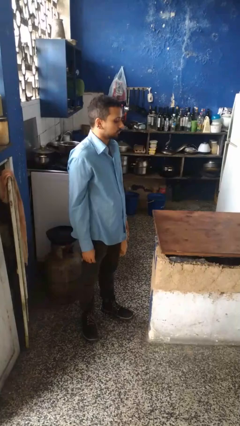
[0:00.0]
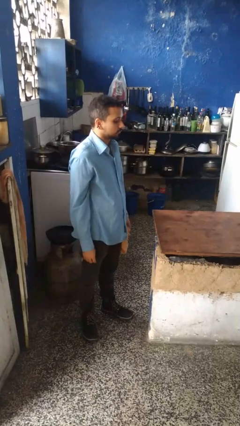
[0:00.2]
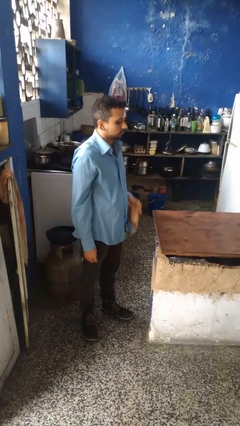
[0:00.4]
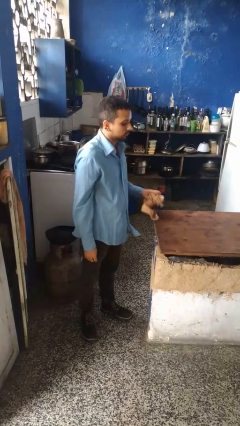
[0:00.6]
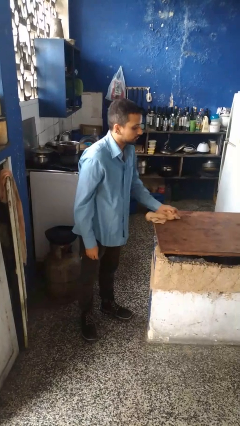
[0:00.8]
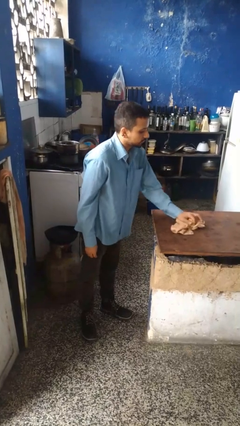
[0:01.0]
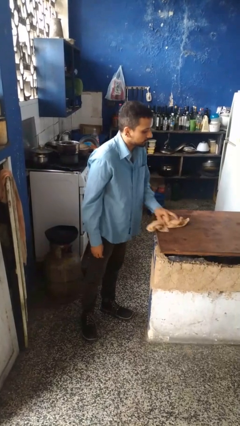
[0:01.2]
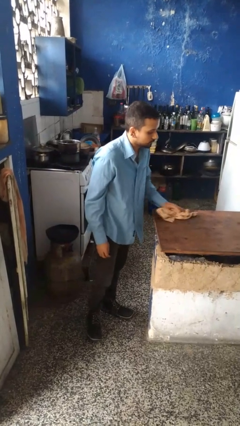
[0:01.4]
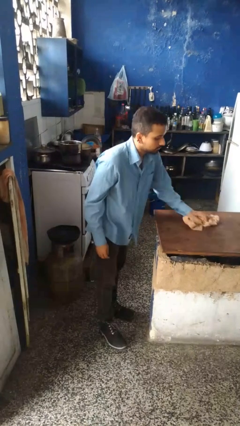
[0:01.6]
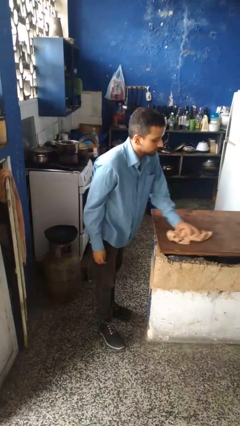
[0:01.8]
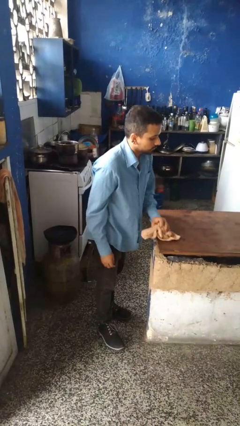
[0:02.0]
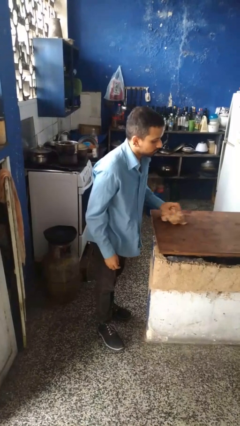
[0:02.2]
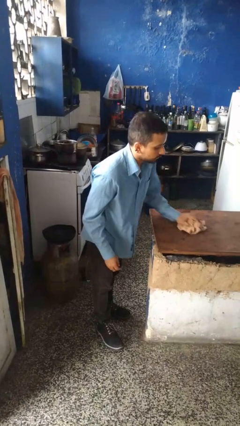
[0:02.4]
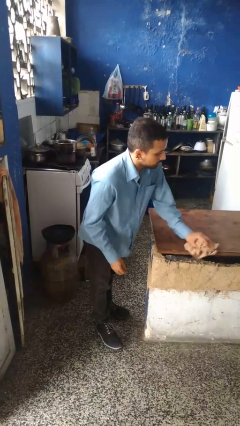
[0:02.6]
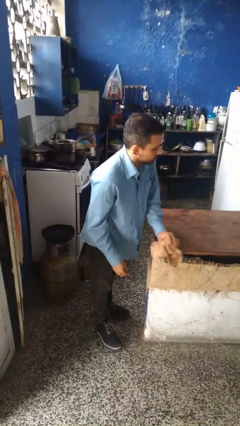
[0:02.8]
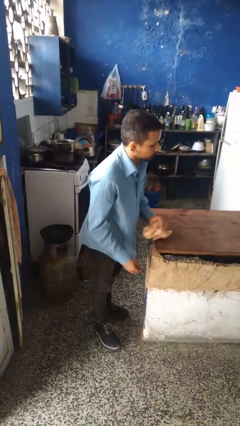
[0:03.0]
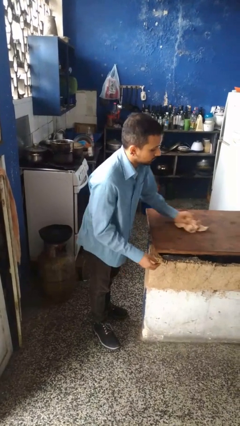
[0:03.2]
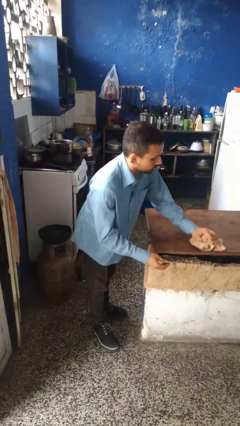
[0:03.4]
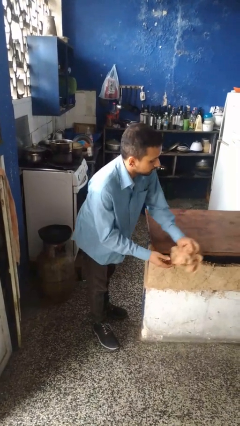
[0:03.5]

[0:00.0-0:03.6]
person cleans table with rag

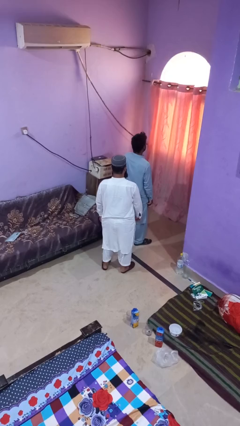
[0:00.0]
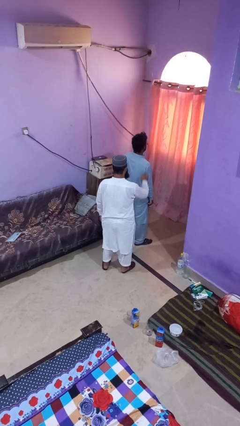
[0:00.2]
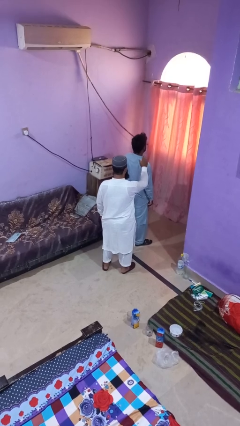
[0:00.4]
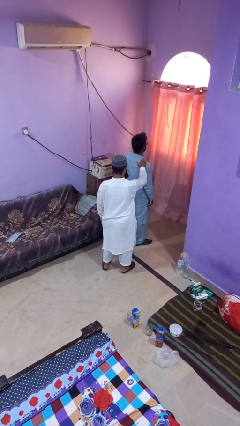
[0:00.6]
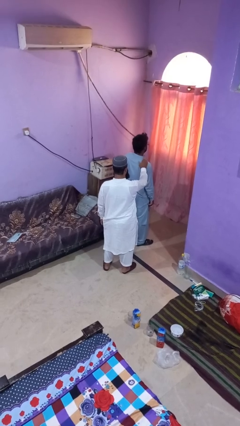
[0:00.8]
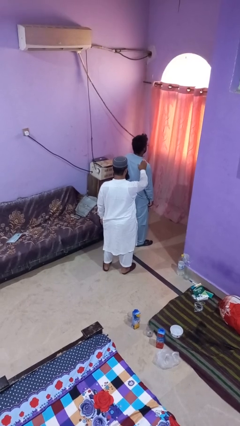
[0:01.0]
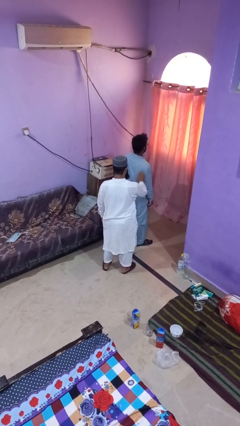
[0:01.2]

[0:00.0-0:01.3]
person pounds shoulders of person

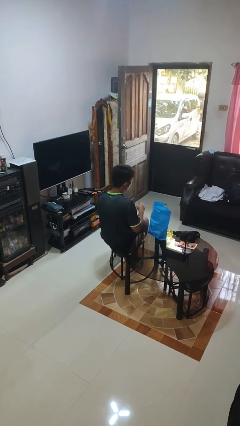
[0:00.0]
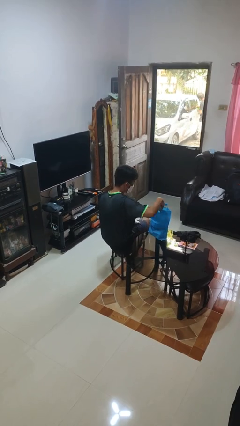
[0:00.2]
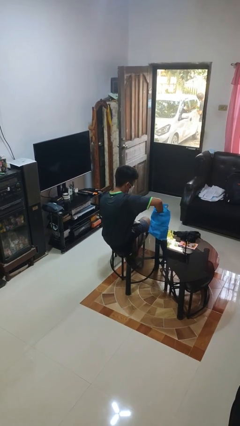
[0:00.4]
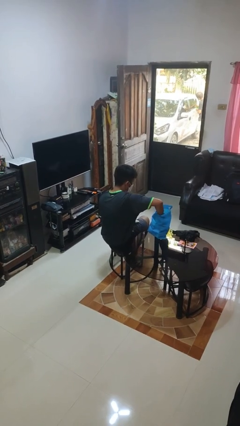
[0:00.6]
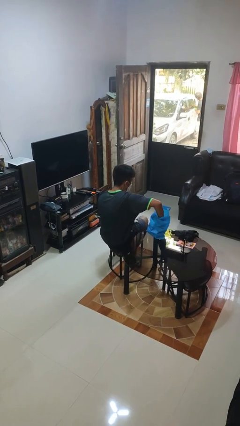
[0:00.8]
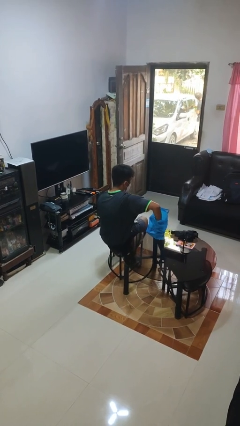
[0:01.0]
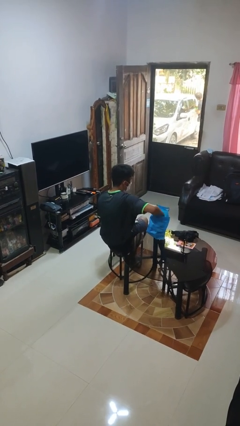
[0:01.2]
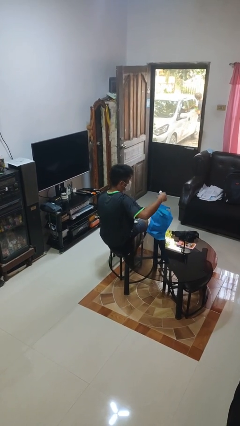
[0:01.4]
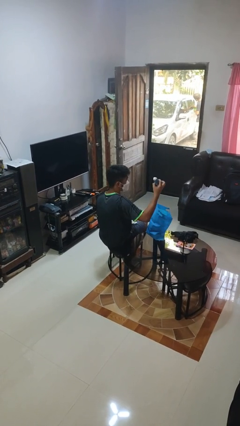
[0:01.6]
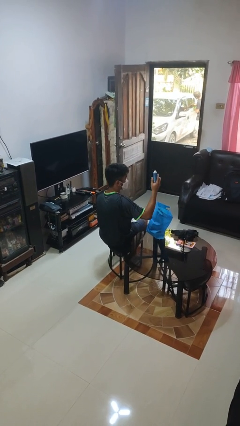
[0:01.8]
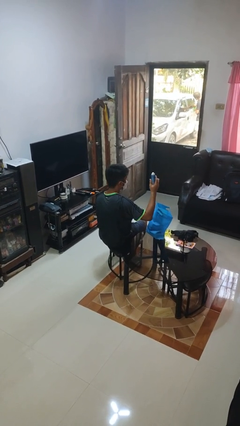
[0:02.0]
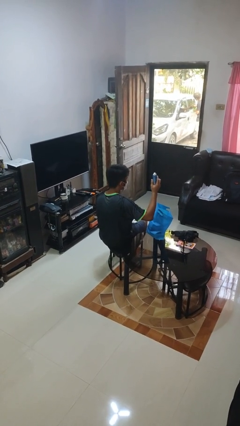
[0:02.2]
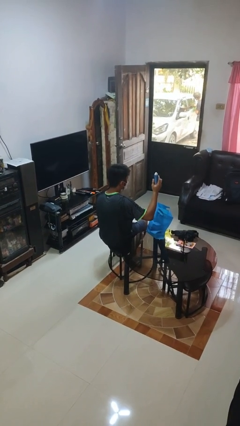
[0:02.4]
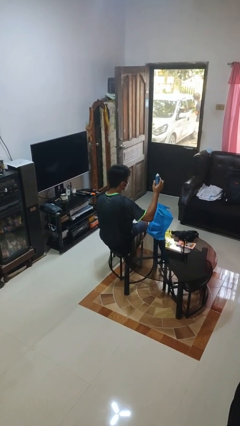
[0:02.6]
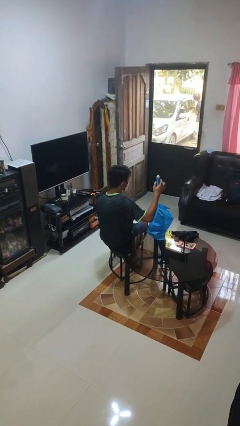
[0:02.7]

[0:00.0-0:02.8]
person takes object from bag

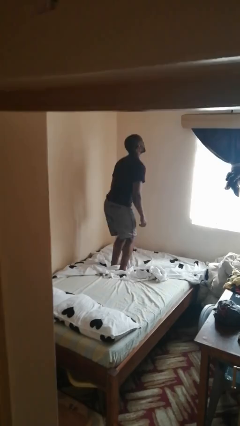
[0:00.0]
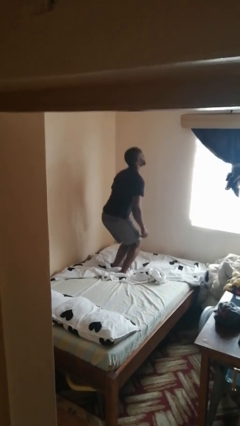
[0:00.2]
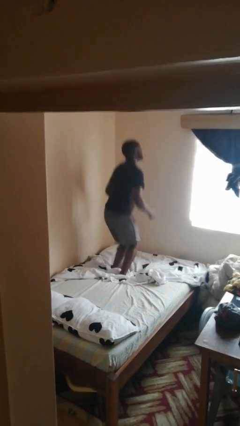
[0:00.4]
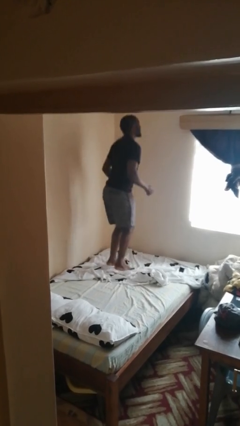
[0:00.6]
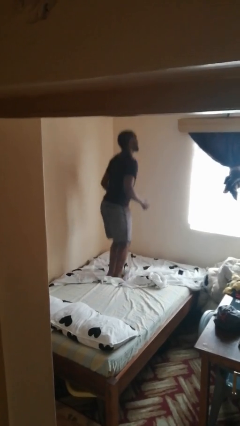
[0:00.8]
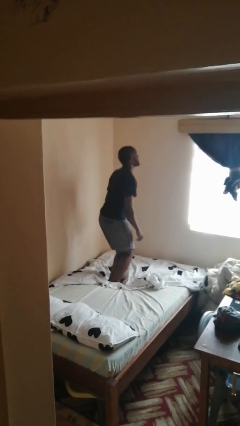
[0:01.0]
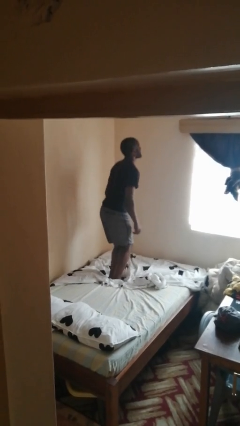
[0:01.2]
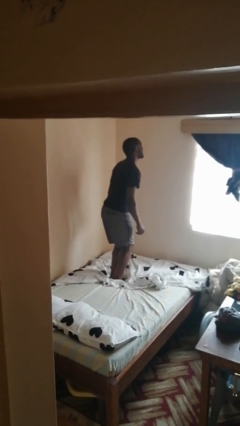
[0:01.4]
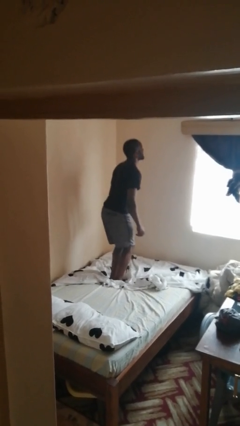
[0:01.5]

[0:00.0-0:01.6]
person jumps on bed

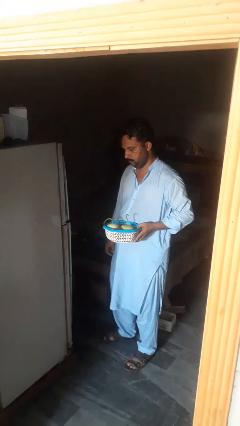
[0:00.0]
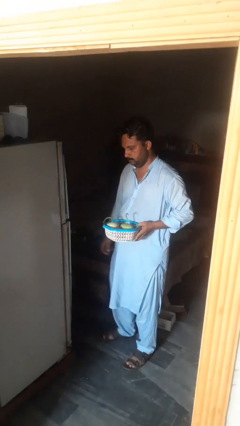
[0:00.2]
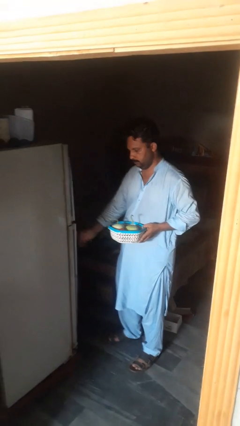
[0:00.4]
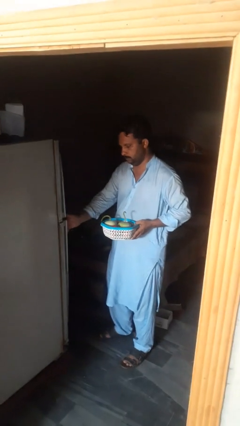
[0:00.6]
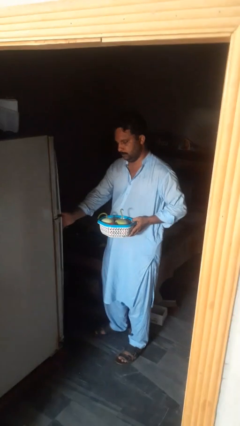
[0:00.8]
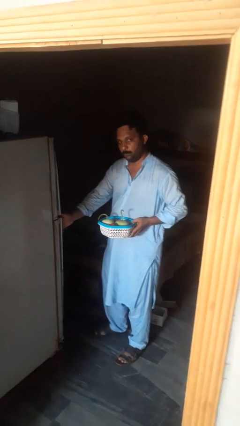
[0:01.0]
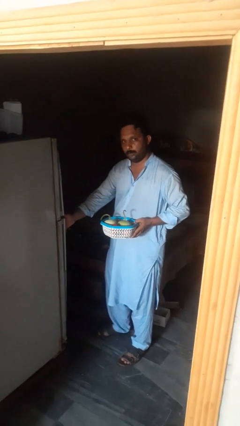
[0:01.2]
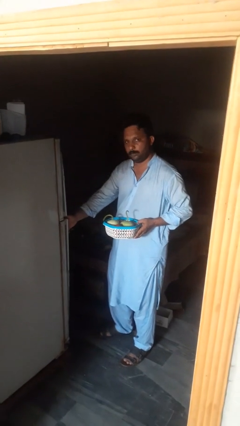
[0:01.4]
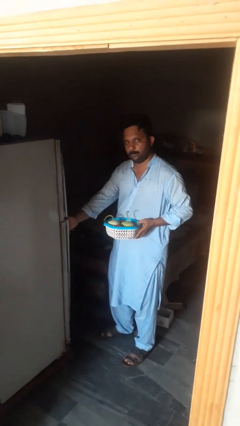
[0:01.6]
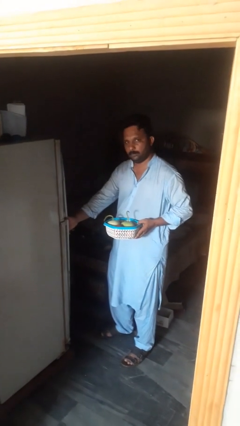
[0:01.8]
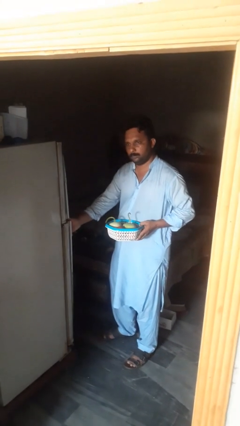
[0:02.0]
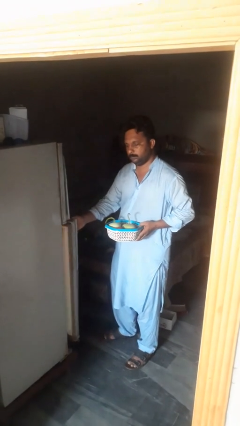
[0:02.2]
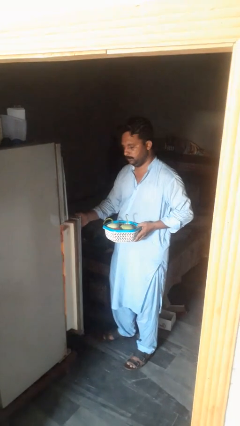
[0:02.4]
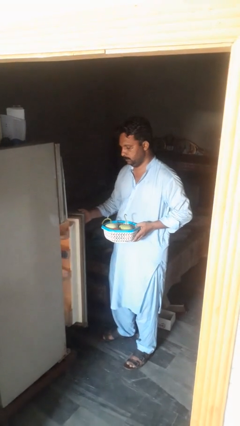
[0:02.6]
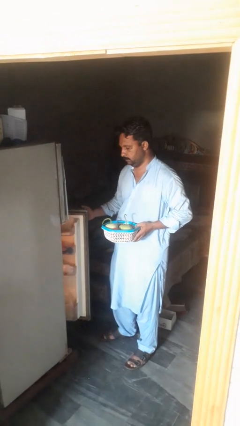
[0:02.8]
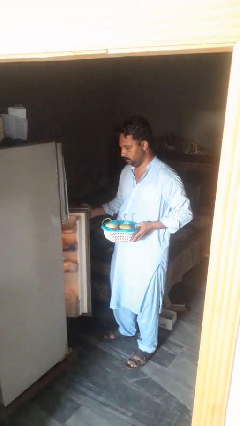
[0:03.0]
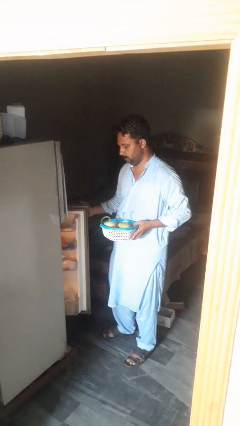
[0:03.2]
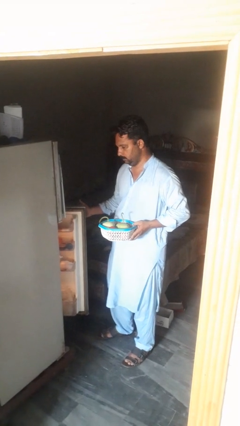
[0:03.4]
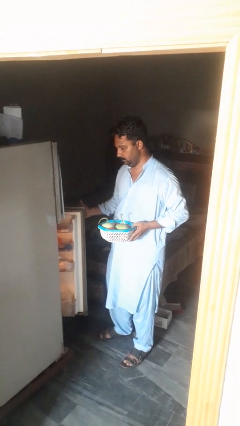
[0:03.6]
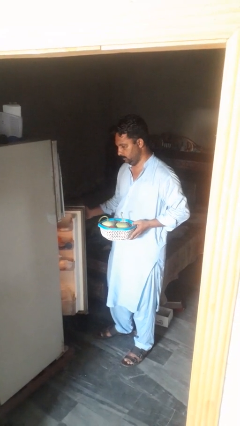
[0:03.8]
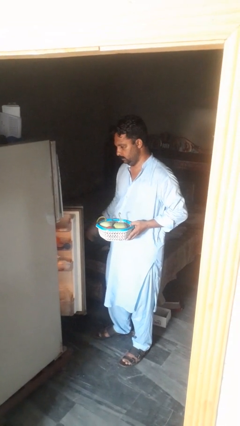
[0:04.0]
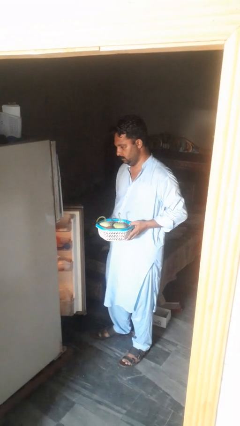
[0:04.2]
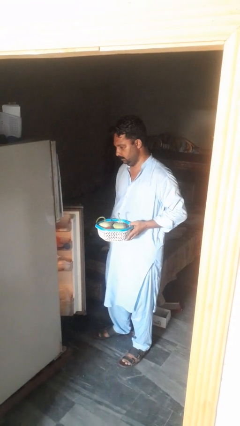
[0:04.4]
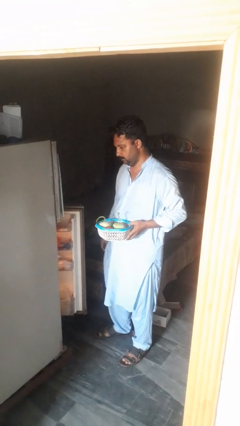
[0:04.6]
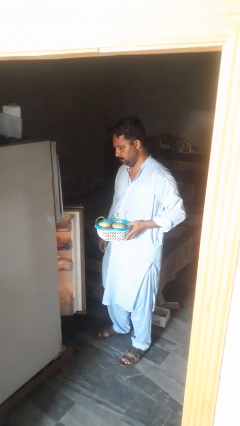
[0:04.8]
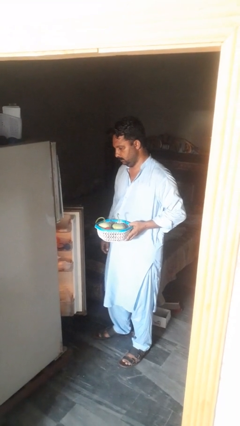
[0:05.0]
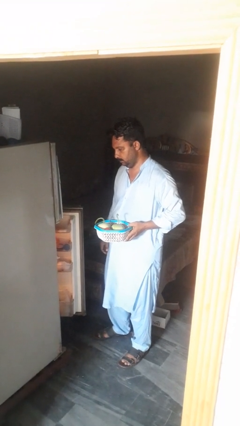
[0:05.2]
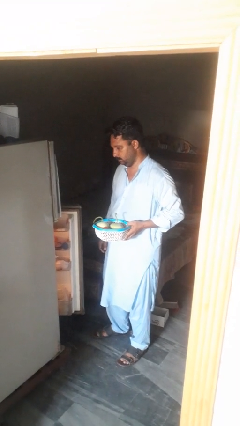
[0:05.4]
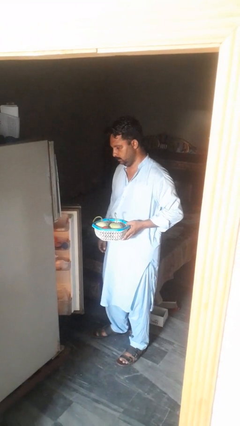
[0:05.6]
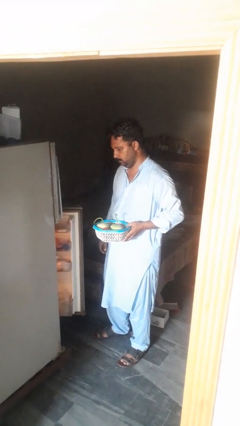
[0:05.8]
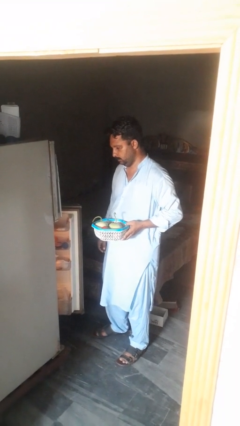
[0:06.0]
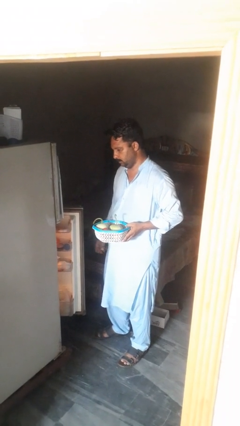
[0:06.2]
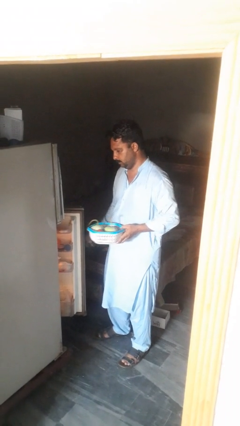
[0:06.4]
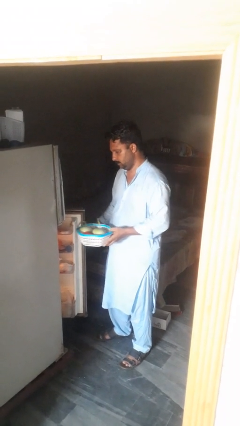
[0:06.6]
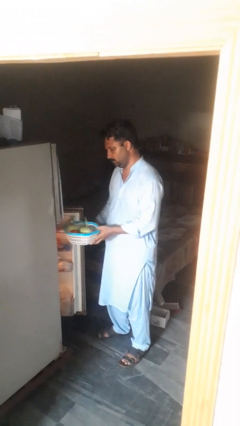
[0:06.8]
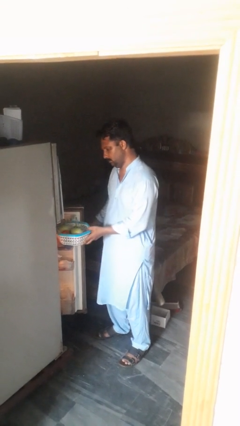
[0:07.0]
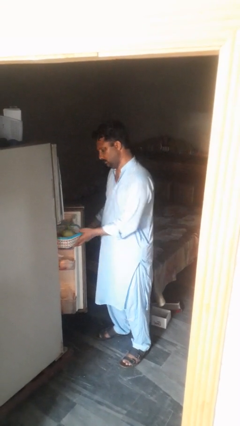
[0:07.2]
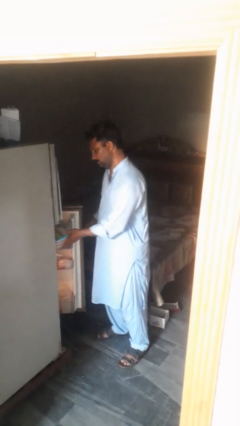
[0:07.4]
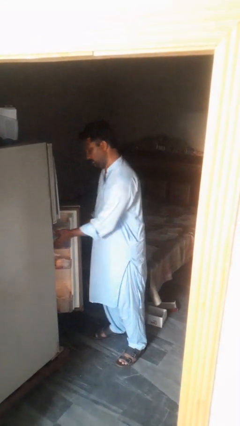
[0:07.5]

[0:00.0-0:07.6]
person opens microwave

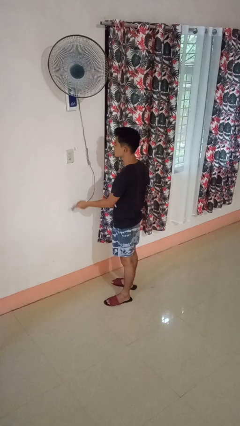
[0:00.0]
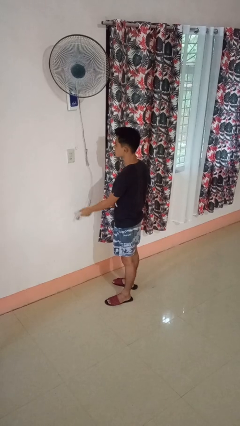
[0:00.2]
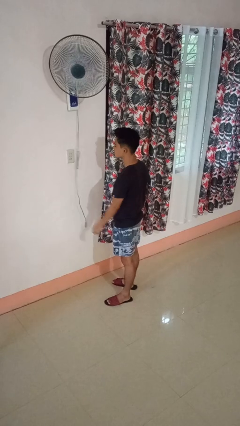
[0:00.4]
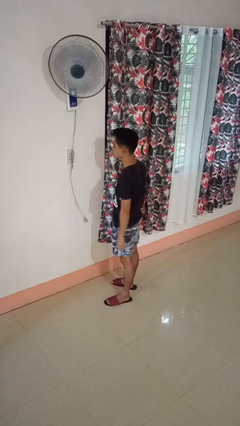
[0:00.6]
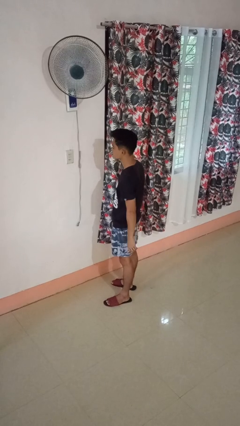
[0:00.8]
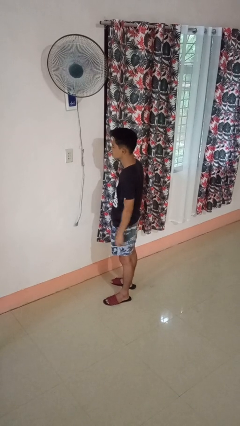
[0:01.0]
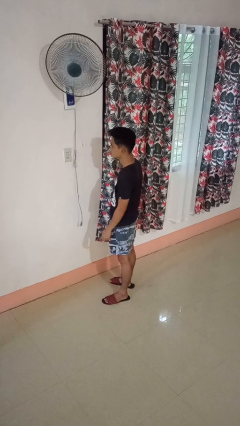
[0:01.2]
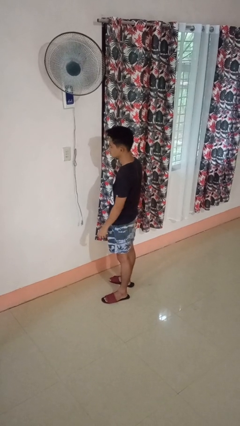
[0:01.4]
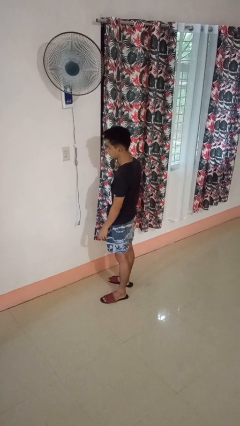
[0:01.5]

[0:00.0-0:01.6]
person unplugs from electrical socket
